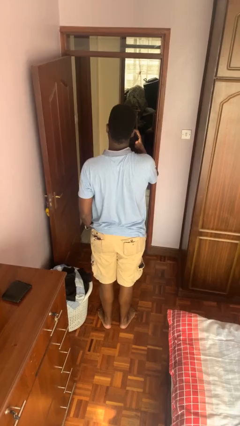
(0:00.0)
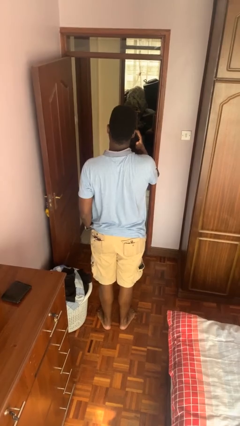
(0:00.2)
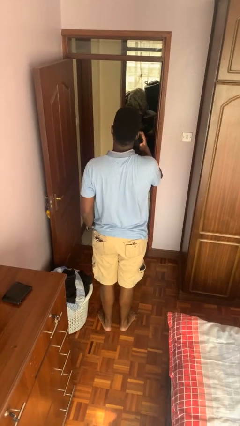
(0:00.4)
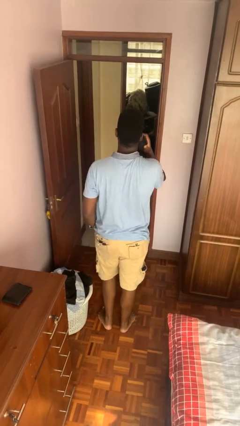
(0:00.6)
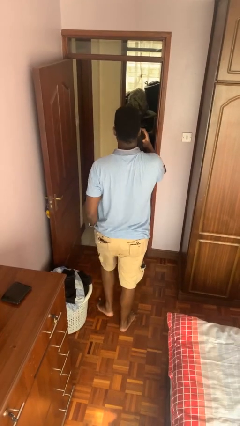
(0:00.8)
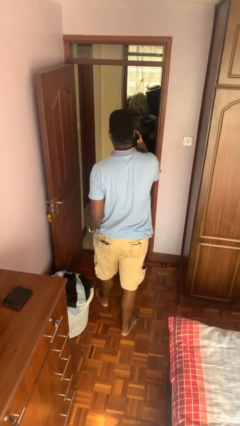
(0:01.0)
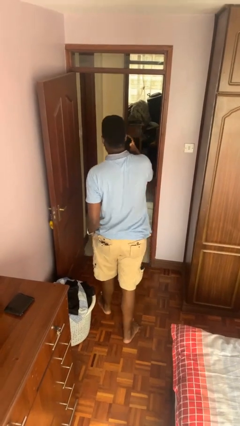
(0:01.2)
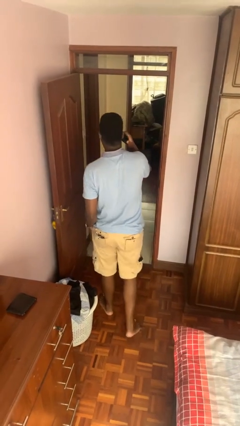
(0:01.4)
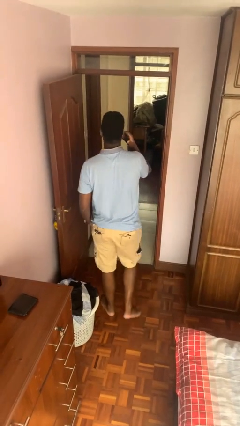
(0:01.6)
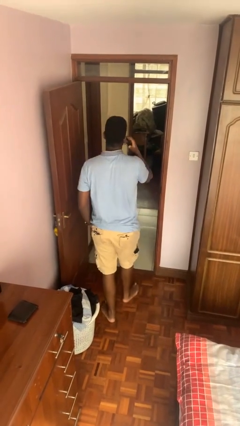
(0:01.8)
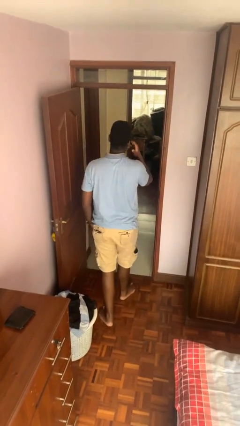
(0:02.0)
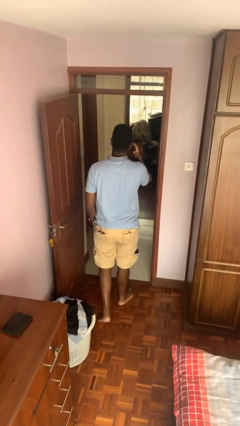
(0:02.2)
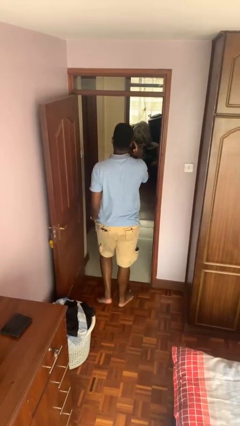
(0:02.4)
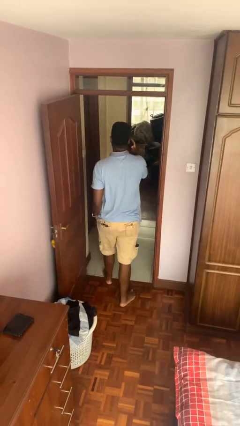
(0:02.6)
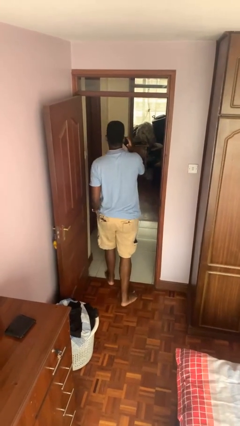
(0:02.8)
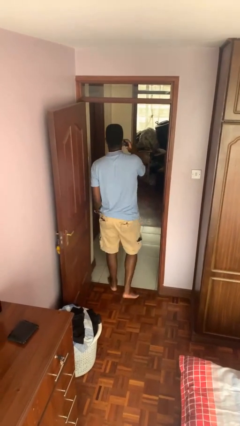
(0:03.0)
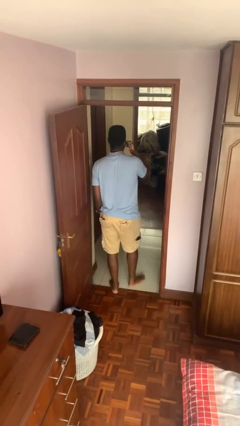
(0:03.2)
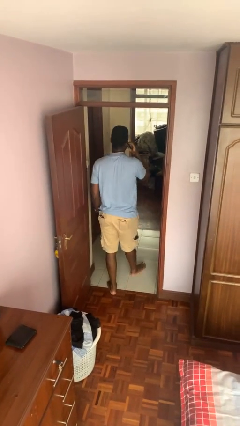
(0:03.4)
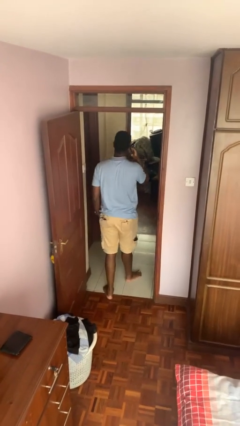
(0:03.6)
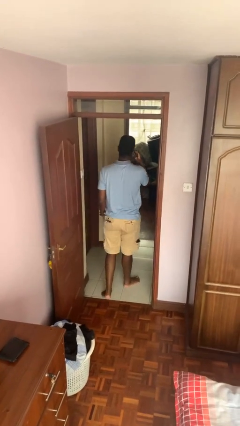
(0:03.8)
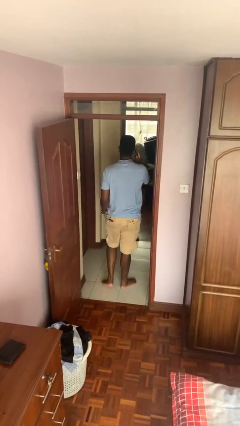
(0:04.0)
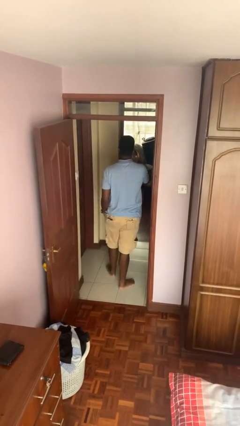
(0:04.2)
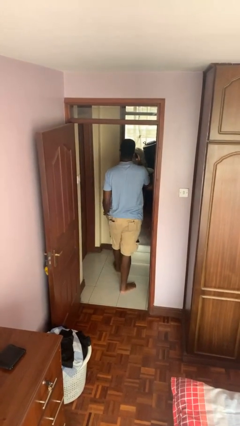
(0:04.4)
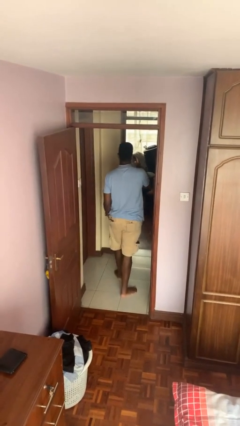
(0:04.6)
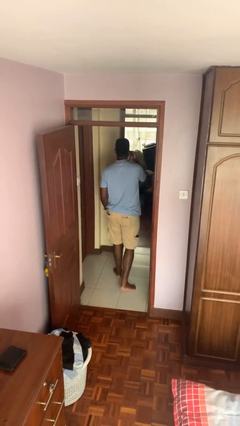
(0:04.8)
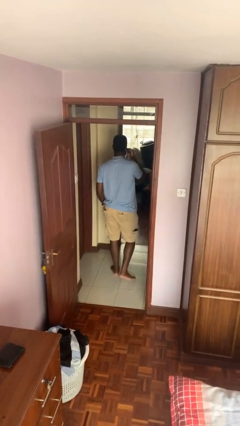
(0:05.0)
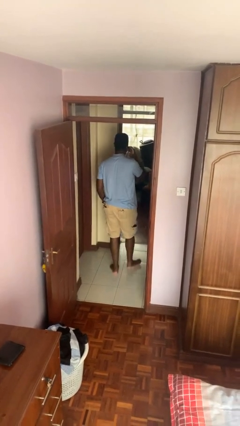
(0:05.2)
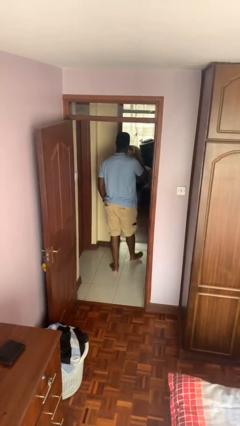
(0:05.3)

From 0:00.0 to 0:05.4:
person exits scene through structure

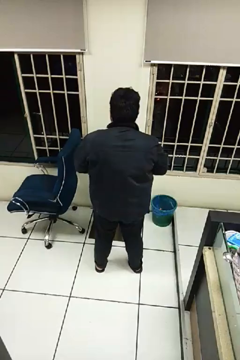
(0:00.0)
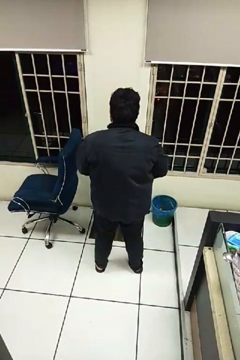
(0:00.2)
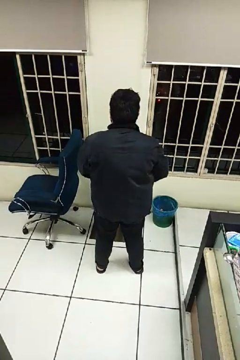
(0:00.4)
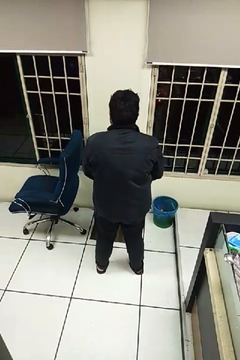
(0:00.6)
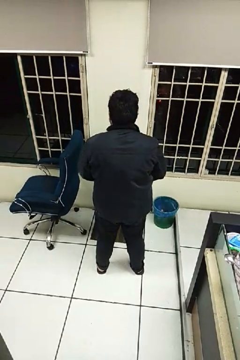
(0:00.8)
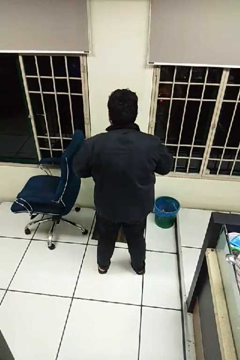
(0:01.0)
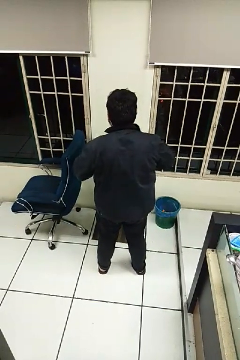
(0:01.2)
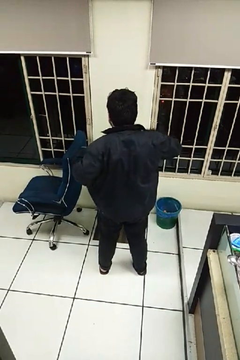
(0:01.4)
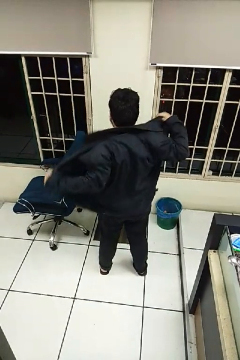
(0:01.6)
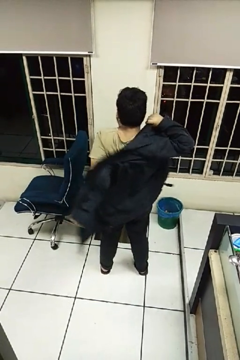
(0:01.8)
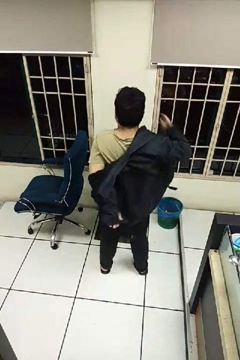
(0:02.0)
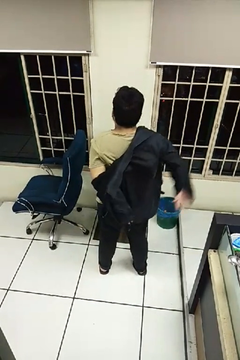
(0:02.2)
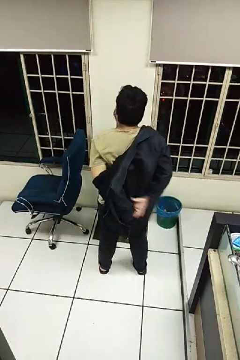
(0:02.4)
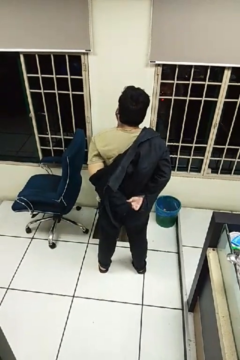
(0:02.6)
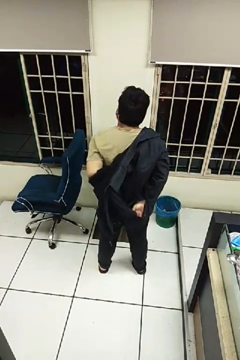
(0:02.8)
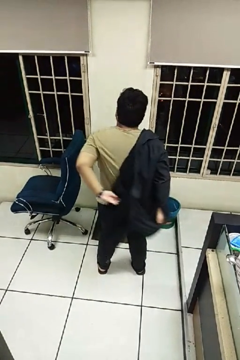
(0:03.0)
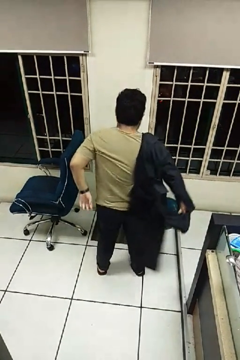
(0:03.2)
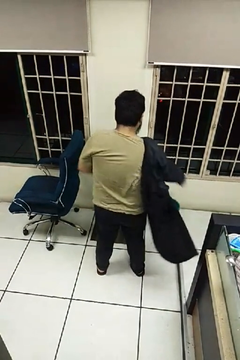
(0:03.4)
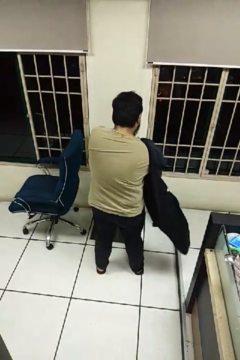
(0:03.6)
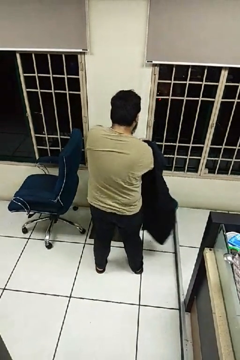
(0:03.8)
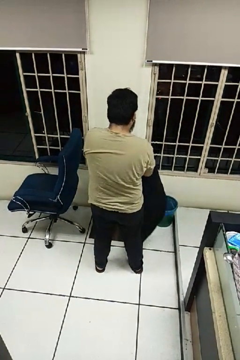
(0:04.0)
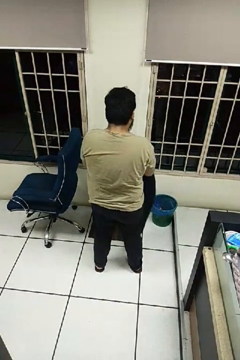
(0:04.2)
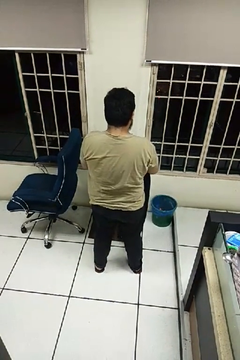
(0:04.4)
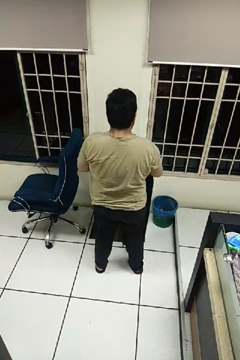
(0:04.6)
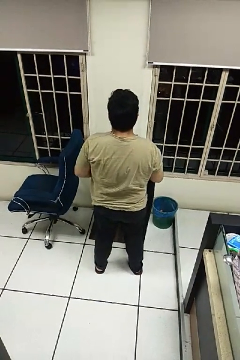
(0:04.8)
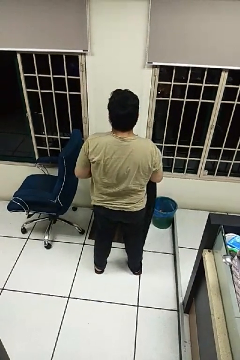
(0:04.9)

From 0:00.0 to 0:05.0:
person takes off shirt

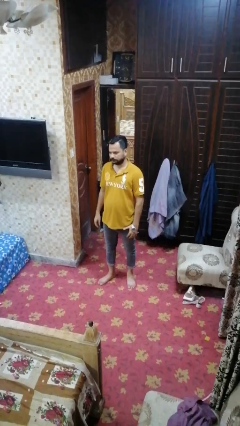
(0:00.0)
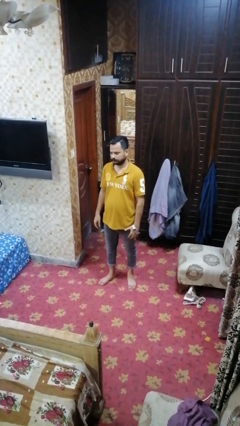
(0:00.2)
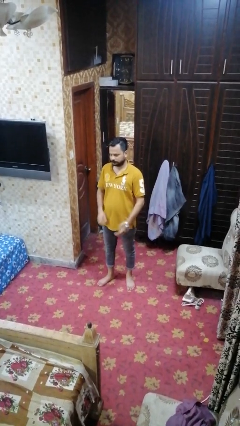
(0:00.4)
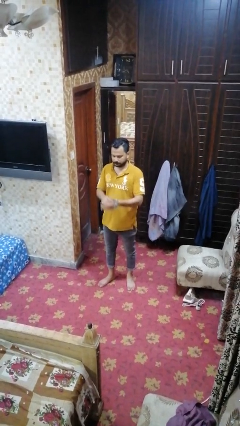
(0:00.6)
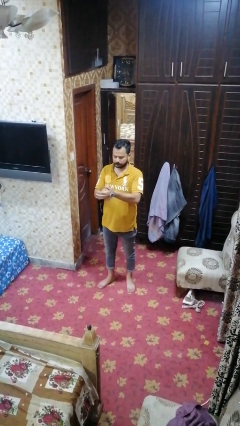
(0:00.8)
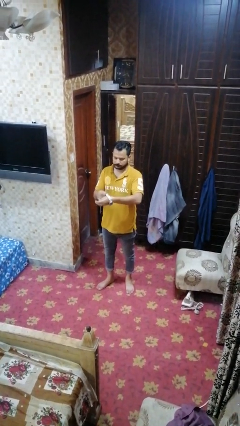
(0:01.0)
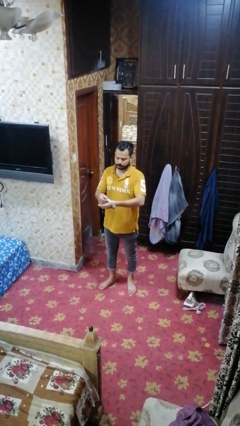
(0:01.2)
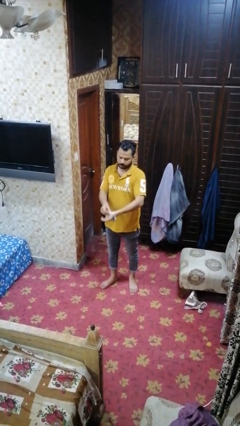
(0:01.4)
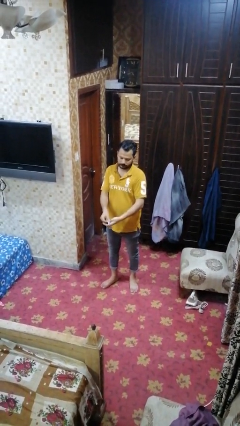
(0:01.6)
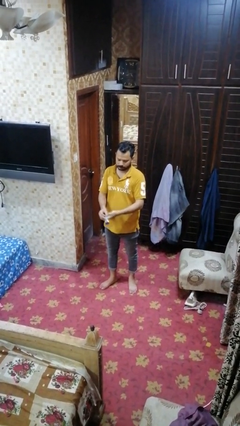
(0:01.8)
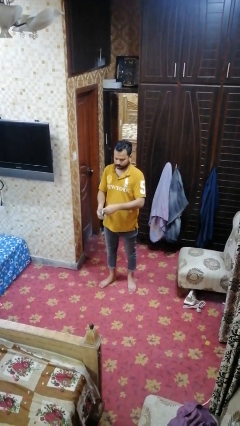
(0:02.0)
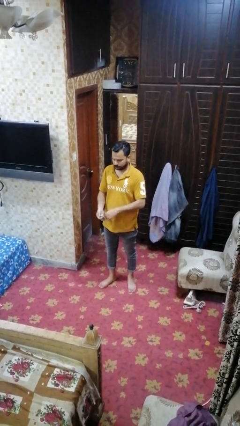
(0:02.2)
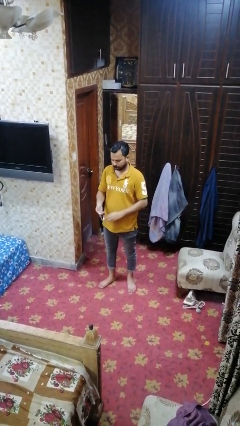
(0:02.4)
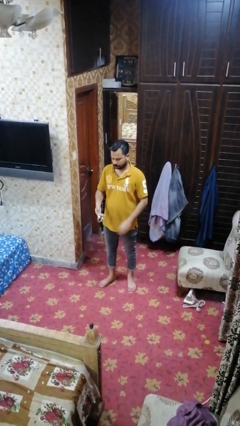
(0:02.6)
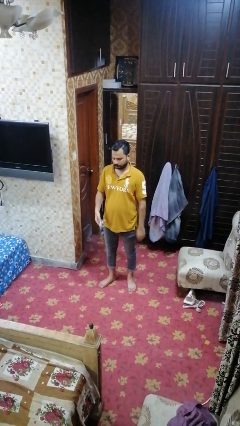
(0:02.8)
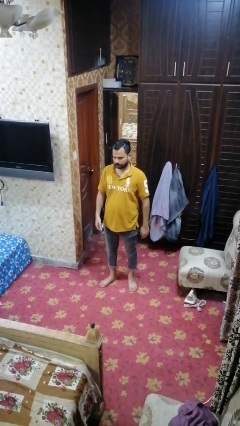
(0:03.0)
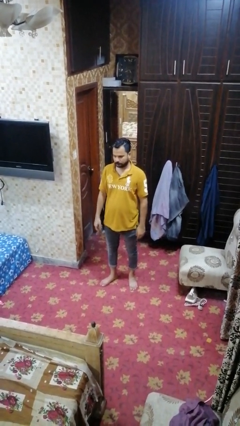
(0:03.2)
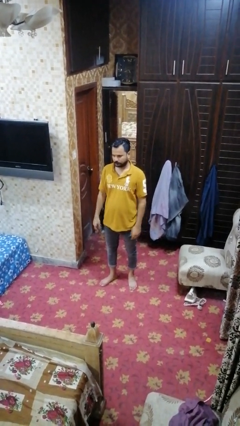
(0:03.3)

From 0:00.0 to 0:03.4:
person takes off wristwatch

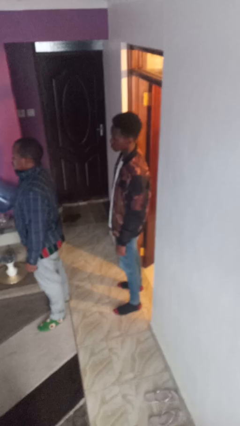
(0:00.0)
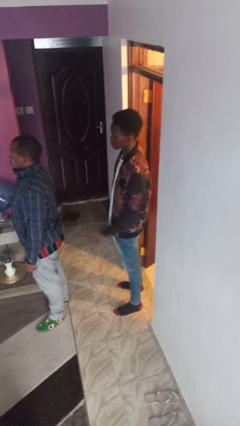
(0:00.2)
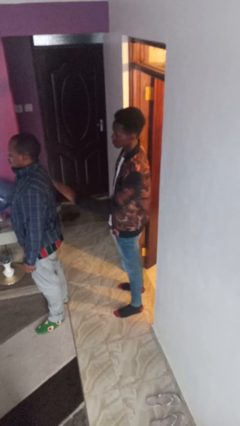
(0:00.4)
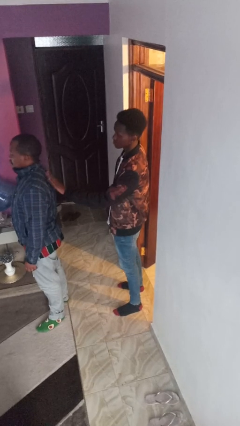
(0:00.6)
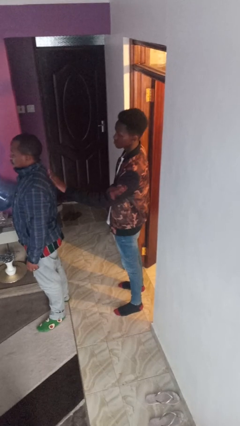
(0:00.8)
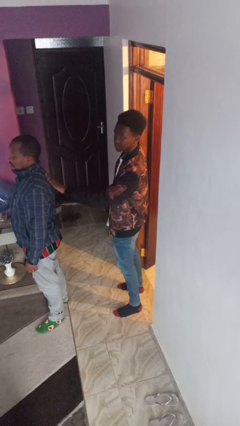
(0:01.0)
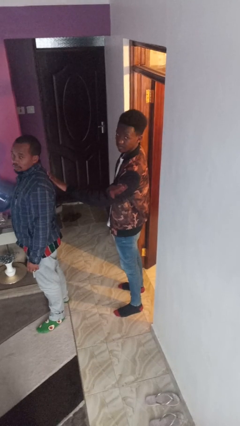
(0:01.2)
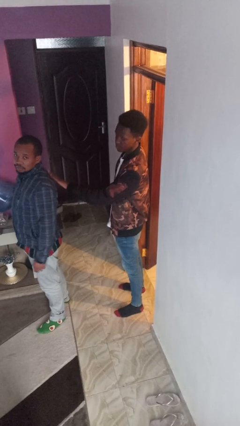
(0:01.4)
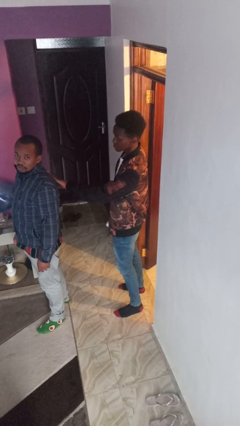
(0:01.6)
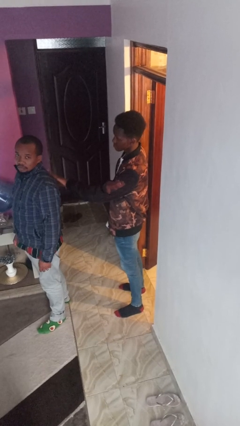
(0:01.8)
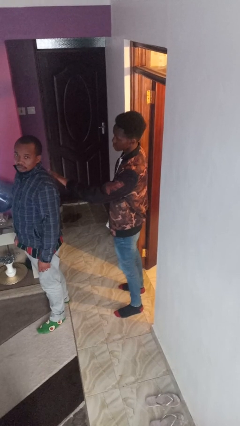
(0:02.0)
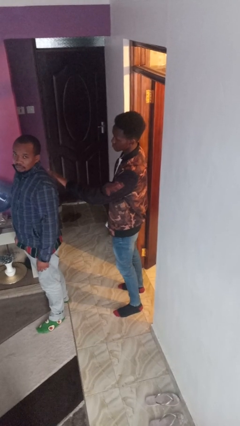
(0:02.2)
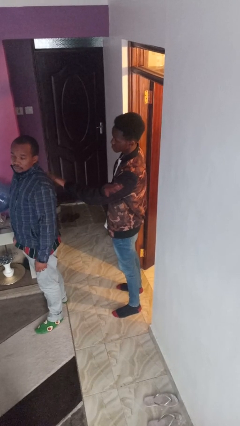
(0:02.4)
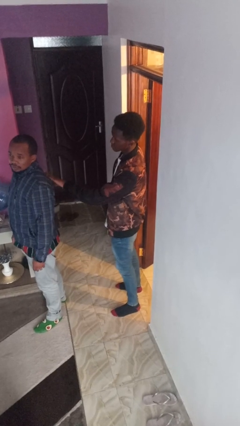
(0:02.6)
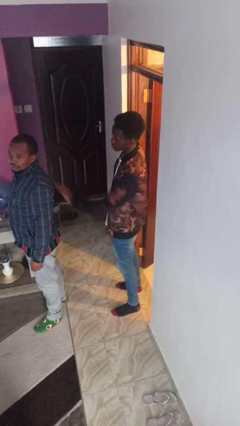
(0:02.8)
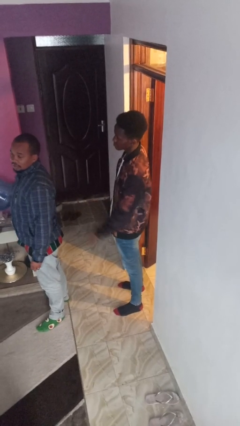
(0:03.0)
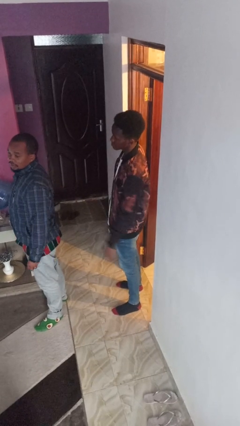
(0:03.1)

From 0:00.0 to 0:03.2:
person touches back of person

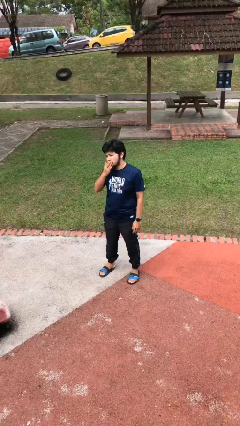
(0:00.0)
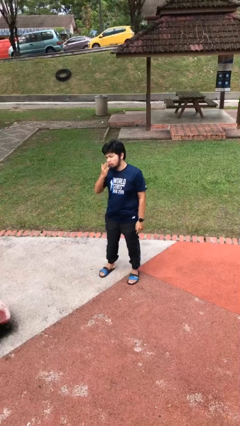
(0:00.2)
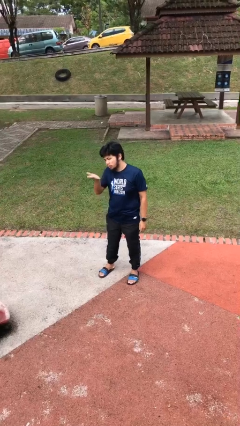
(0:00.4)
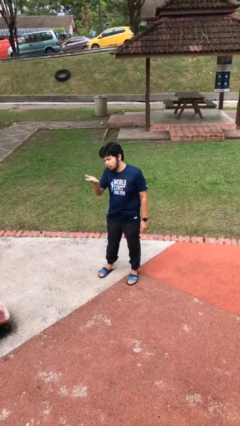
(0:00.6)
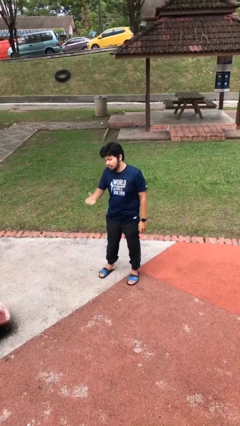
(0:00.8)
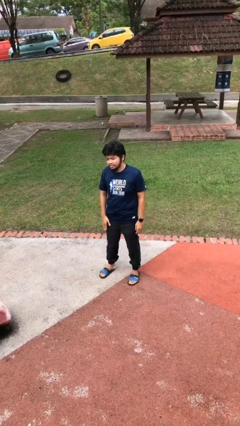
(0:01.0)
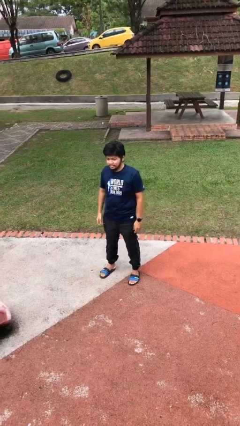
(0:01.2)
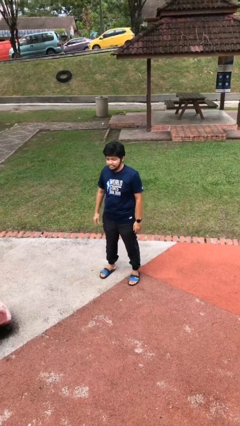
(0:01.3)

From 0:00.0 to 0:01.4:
person gestures blow kiss
